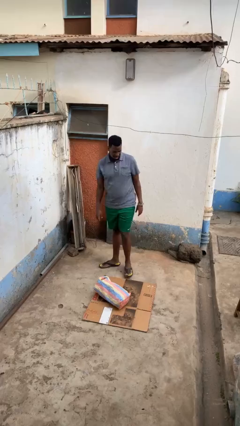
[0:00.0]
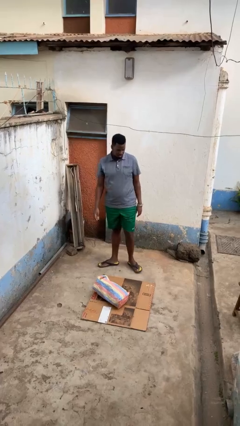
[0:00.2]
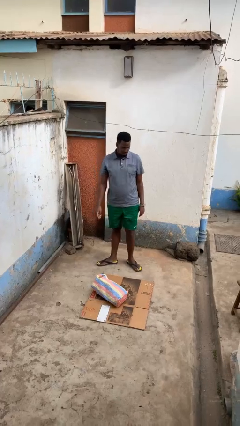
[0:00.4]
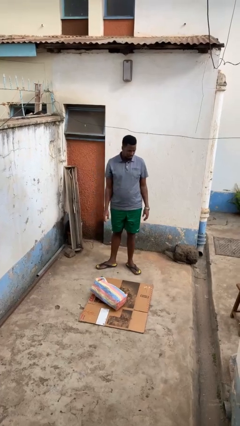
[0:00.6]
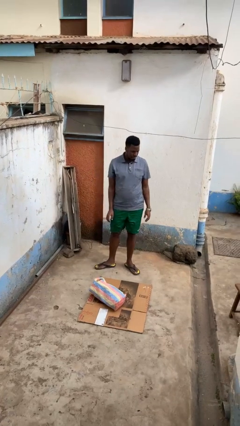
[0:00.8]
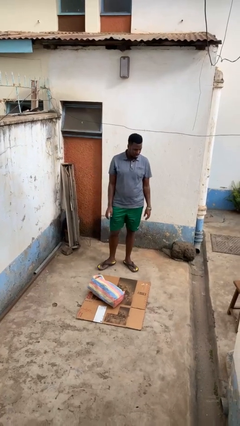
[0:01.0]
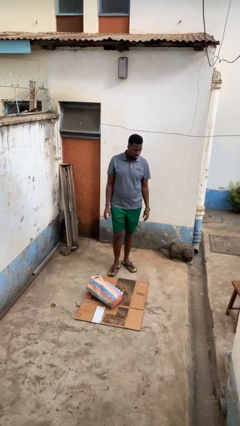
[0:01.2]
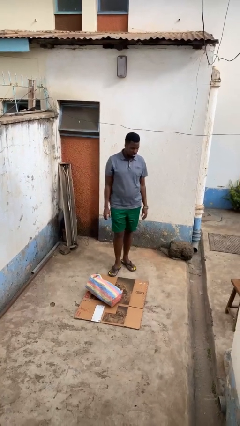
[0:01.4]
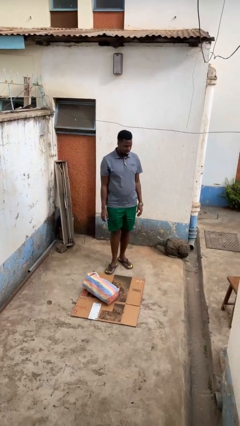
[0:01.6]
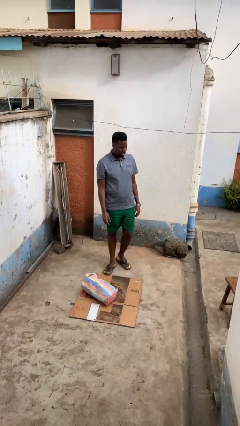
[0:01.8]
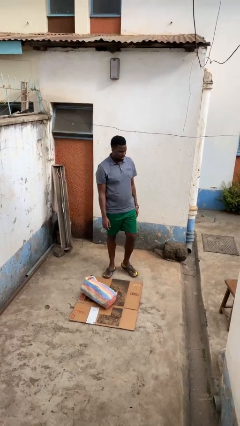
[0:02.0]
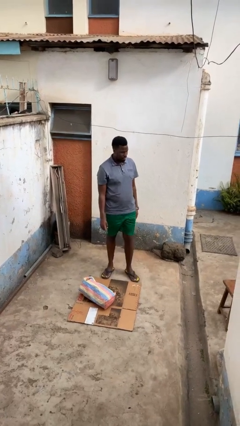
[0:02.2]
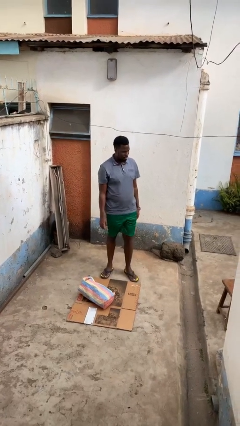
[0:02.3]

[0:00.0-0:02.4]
person picks up object from floor

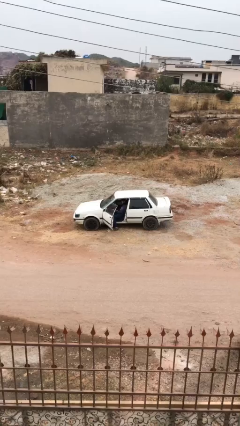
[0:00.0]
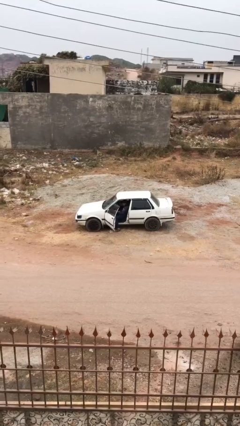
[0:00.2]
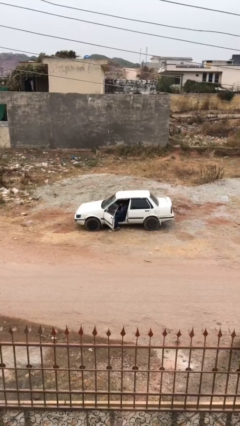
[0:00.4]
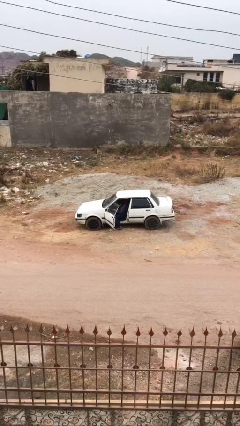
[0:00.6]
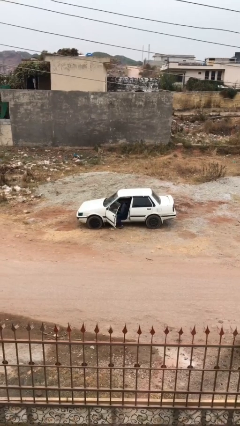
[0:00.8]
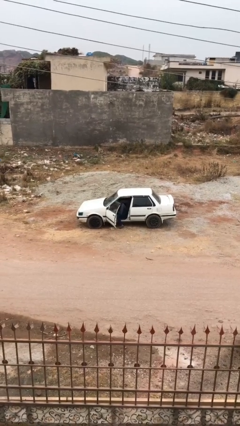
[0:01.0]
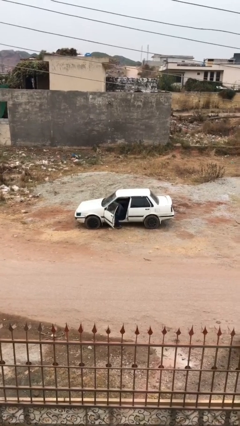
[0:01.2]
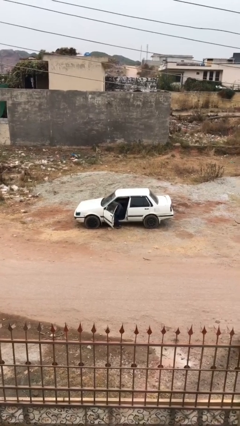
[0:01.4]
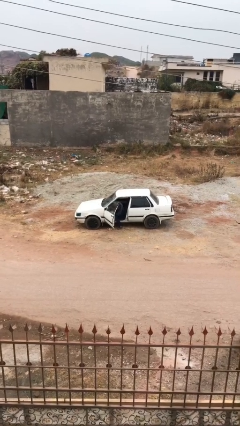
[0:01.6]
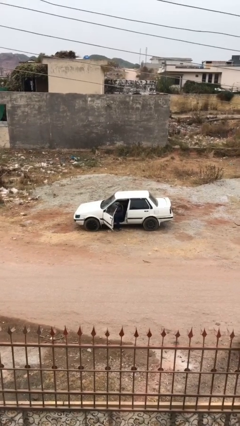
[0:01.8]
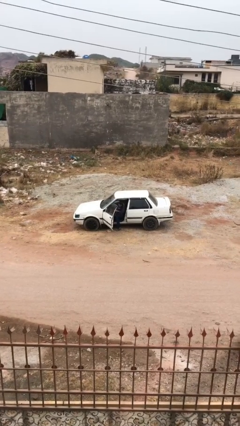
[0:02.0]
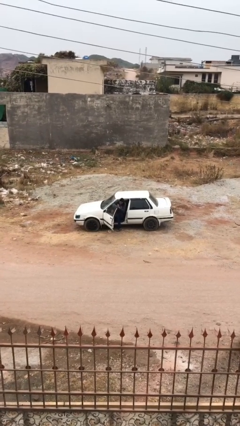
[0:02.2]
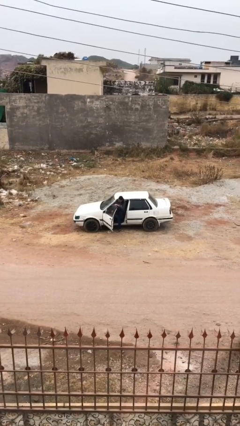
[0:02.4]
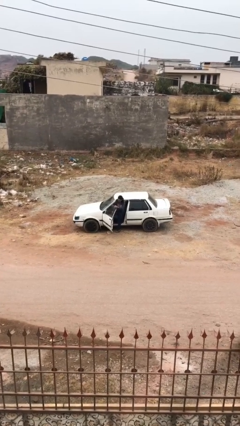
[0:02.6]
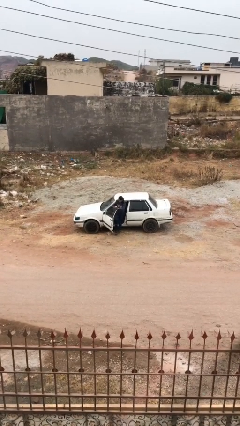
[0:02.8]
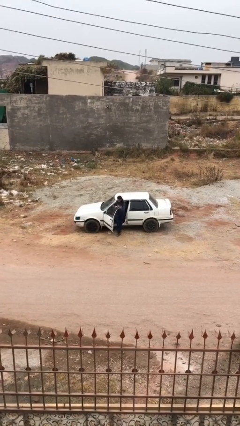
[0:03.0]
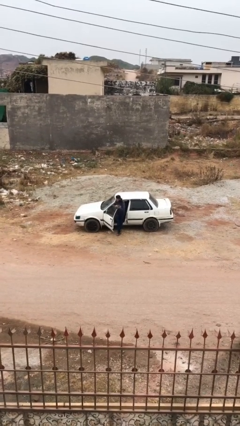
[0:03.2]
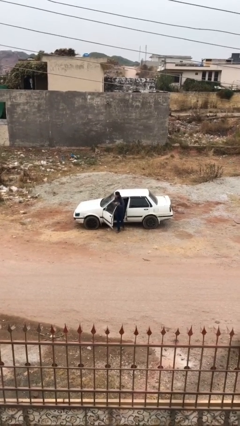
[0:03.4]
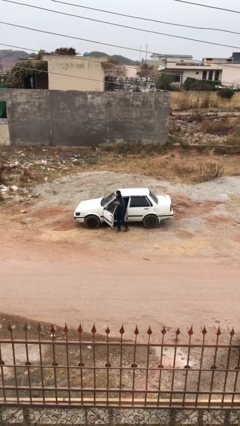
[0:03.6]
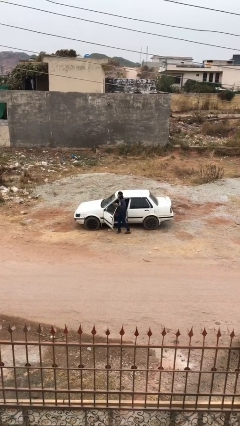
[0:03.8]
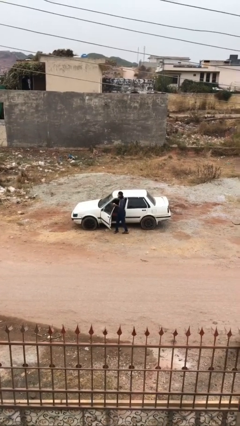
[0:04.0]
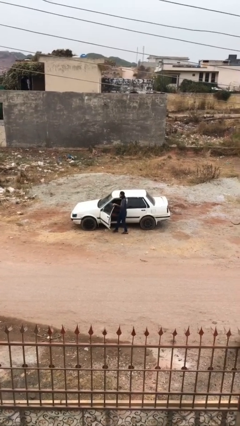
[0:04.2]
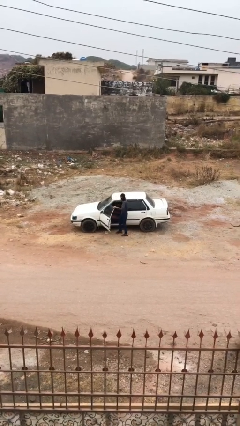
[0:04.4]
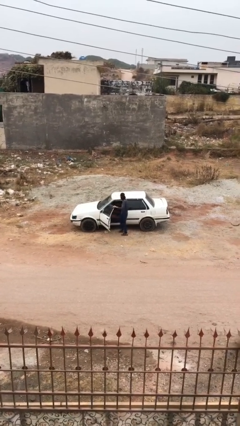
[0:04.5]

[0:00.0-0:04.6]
person exits car

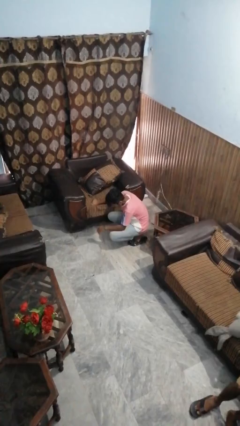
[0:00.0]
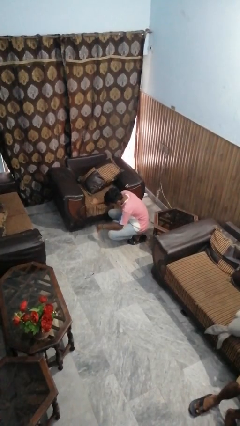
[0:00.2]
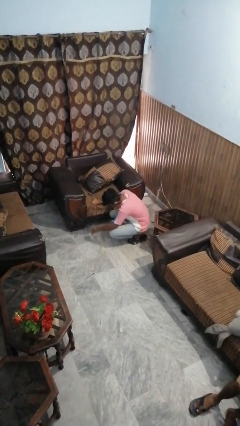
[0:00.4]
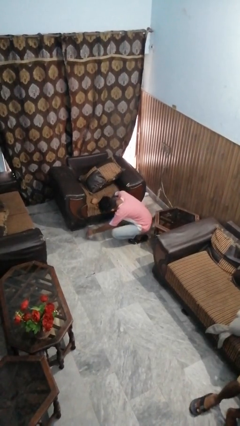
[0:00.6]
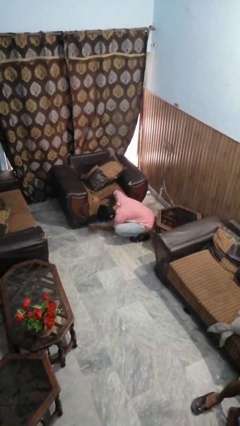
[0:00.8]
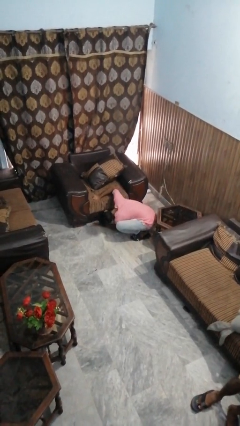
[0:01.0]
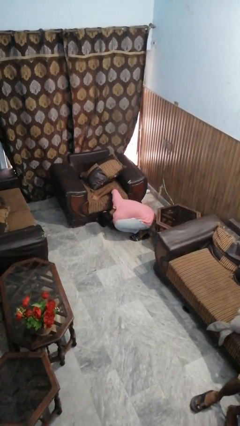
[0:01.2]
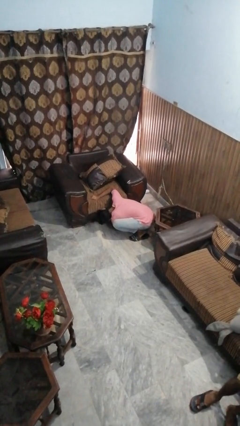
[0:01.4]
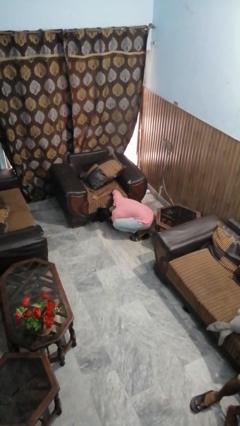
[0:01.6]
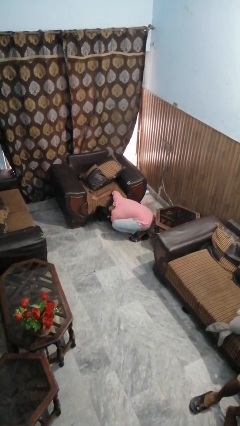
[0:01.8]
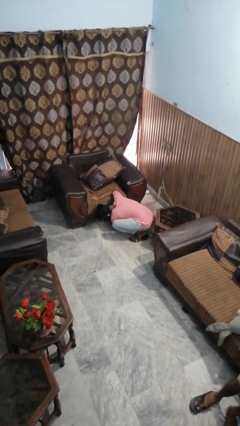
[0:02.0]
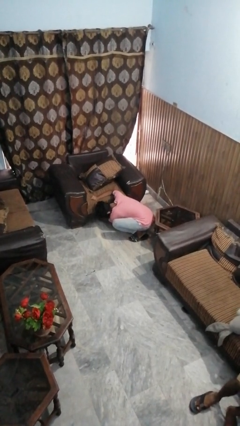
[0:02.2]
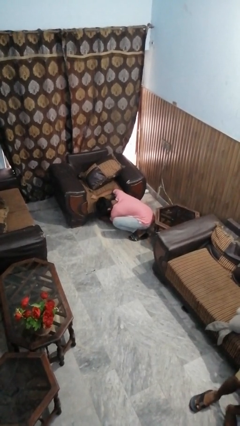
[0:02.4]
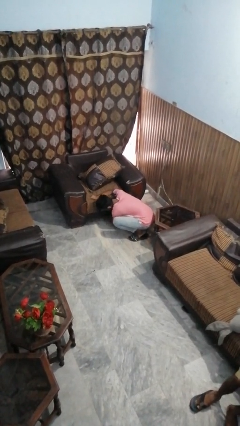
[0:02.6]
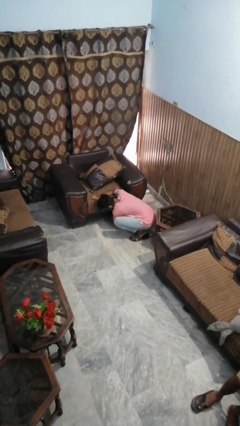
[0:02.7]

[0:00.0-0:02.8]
person searches under couch

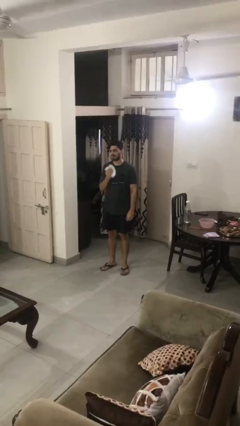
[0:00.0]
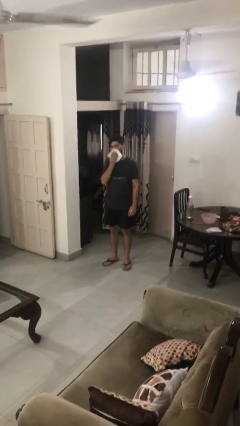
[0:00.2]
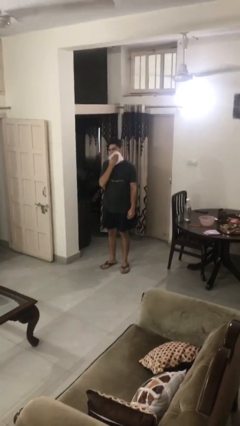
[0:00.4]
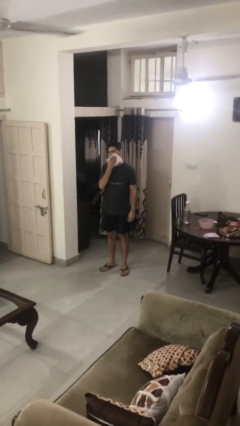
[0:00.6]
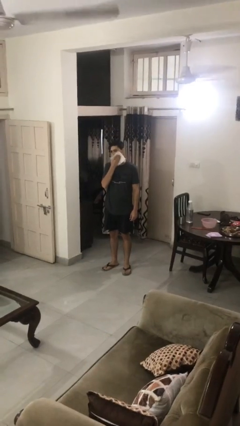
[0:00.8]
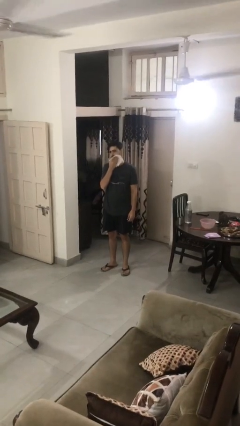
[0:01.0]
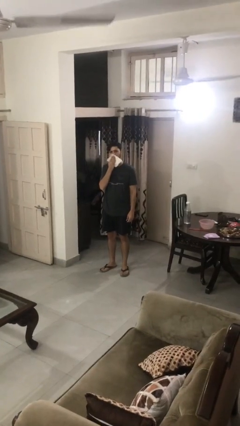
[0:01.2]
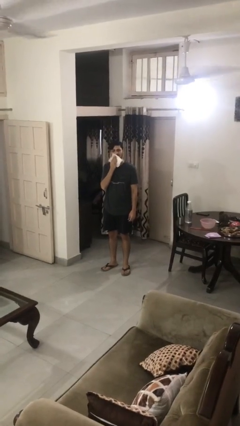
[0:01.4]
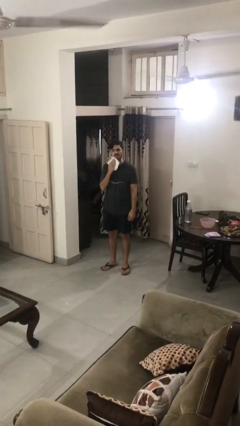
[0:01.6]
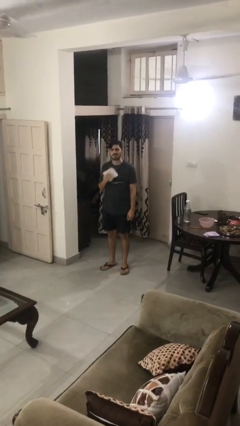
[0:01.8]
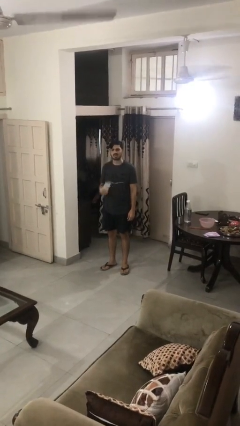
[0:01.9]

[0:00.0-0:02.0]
person wipes mouth with napkin

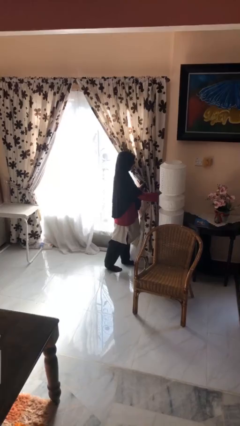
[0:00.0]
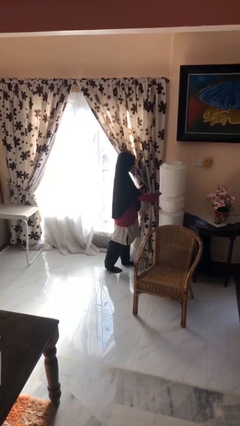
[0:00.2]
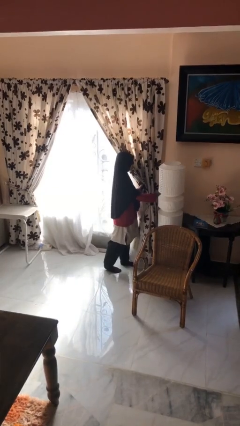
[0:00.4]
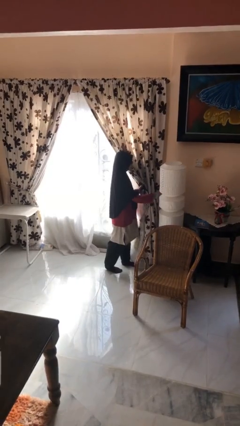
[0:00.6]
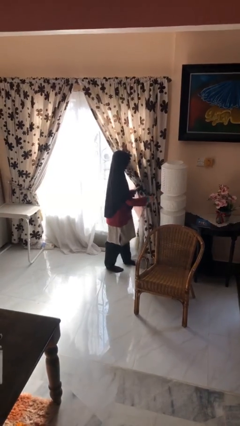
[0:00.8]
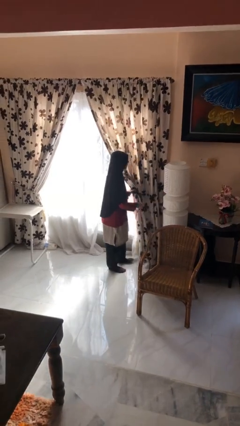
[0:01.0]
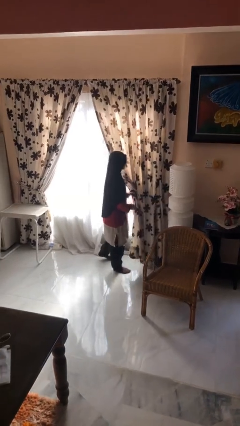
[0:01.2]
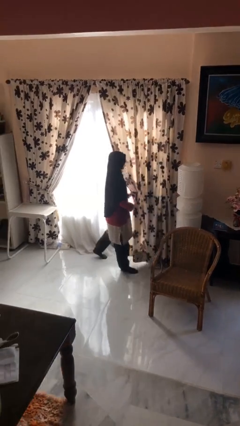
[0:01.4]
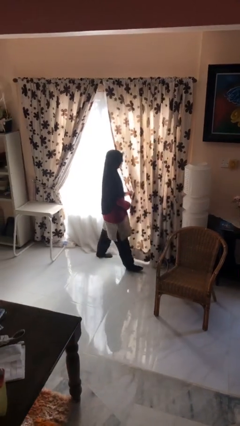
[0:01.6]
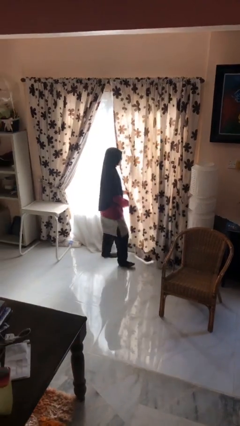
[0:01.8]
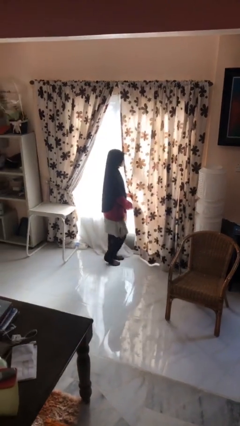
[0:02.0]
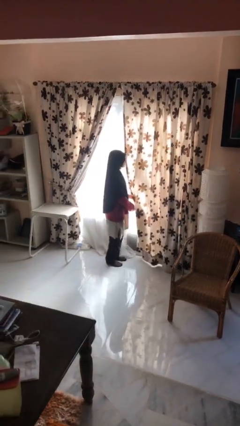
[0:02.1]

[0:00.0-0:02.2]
person closes curtains

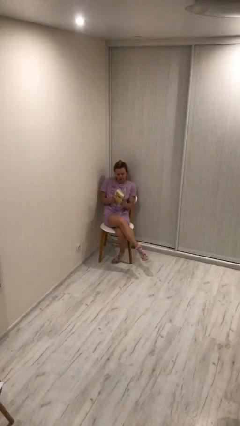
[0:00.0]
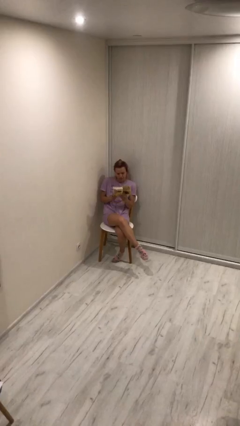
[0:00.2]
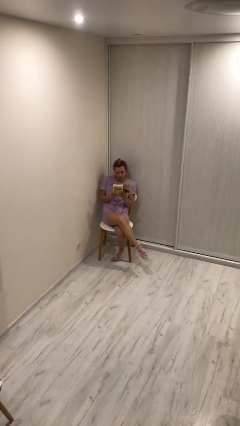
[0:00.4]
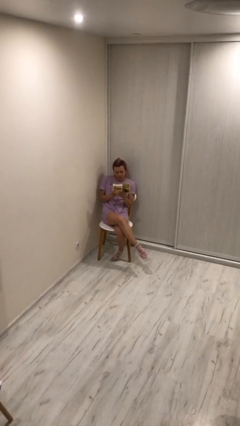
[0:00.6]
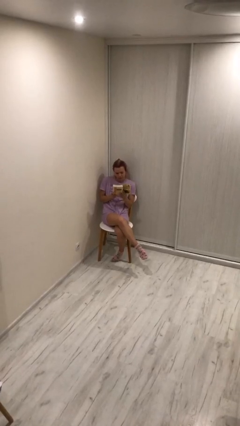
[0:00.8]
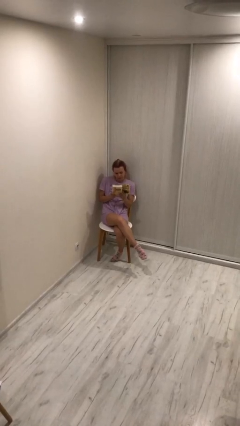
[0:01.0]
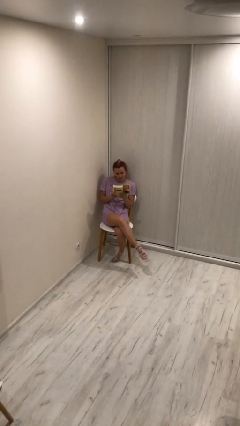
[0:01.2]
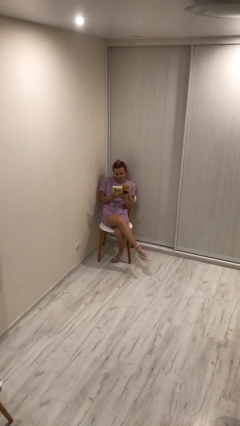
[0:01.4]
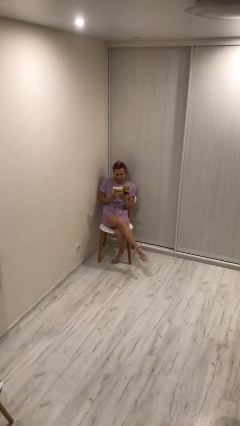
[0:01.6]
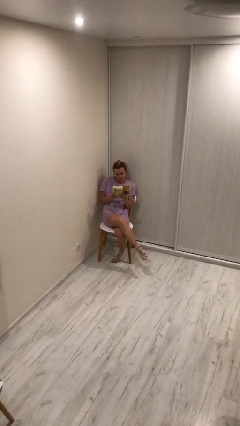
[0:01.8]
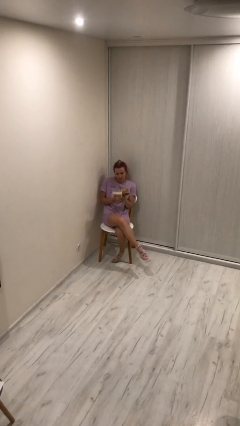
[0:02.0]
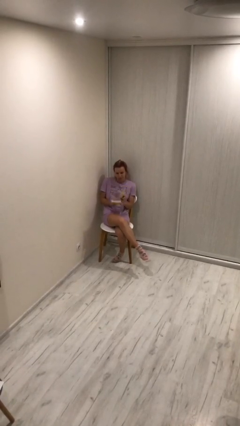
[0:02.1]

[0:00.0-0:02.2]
person reads book

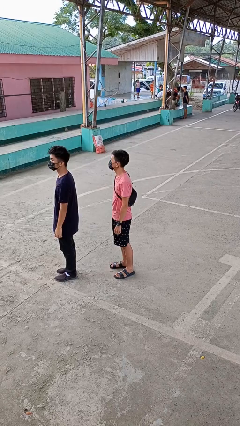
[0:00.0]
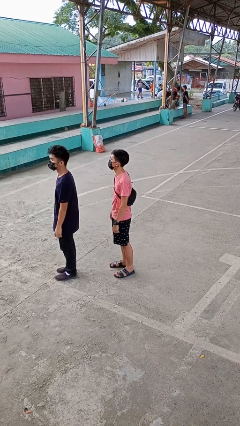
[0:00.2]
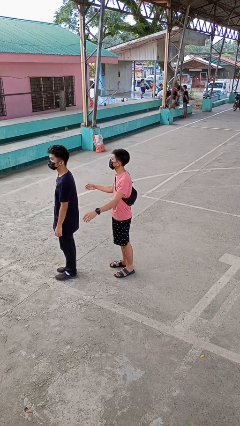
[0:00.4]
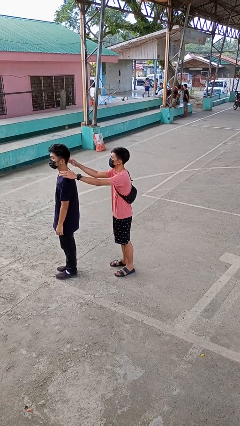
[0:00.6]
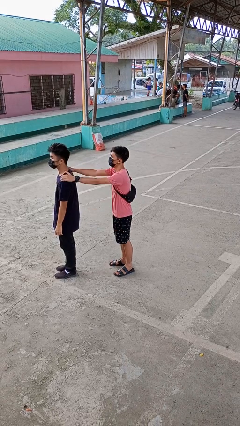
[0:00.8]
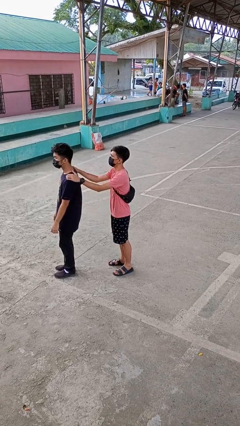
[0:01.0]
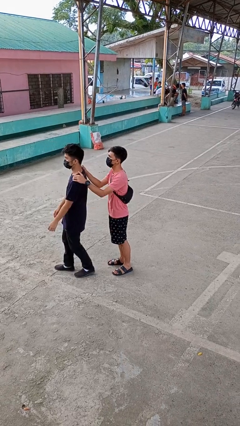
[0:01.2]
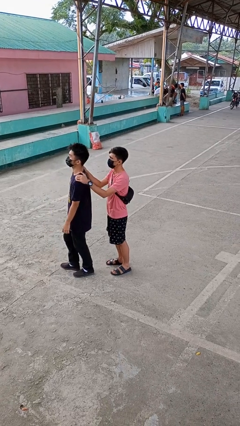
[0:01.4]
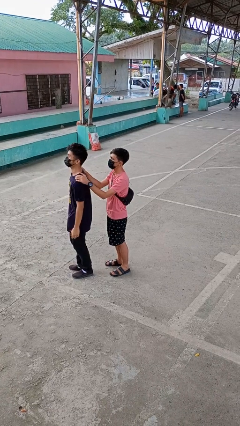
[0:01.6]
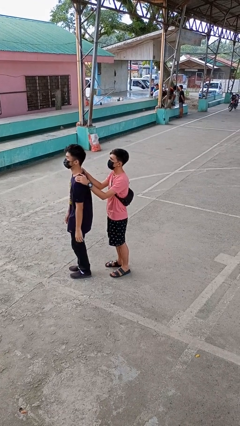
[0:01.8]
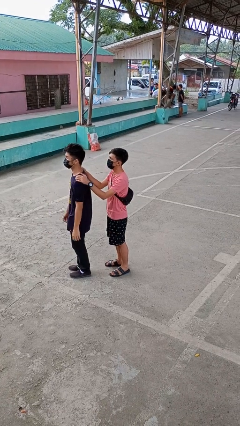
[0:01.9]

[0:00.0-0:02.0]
person grabs person by shoulder
